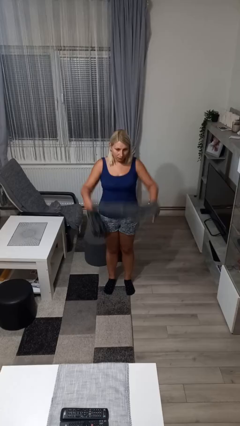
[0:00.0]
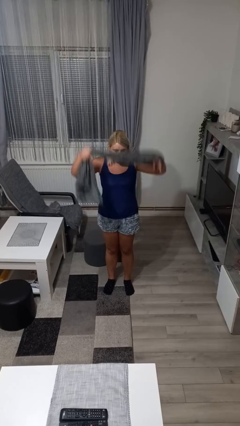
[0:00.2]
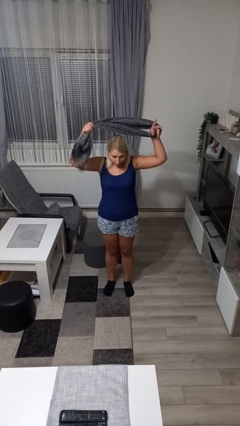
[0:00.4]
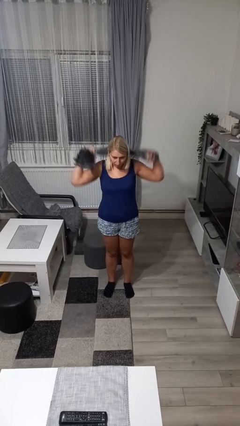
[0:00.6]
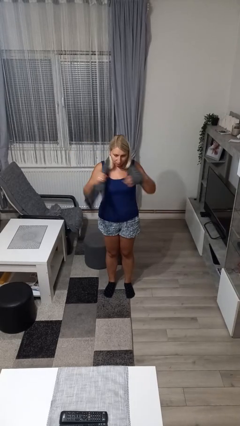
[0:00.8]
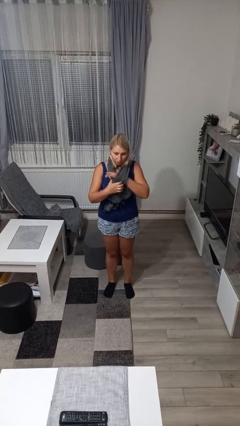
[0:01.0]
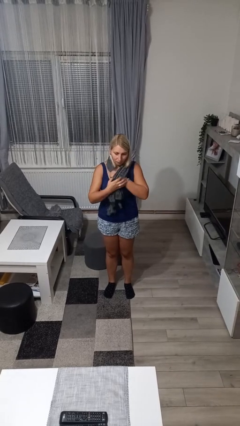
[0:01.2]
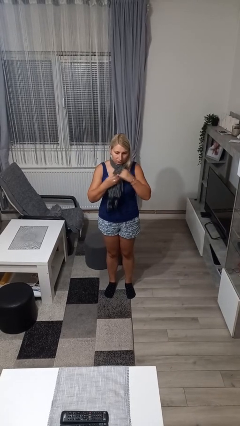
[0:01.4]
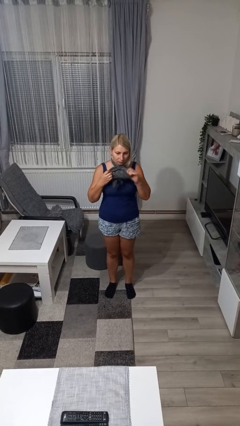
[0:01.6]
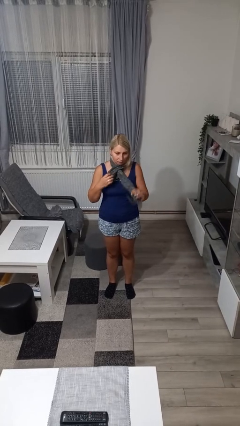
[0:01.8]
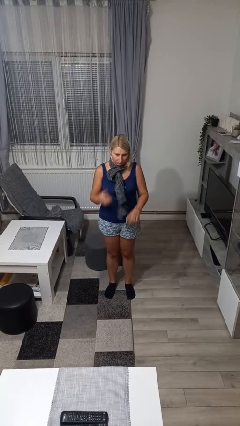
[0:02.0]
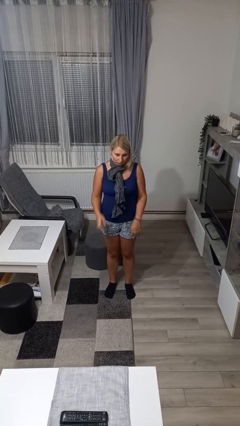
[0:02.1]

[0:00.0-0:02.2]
person puts on scarf

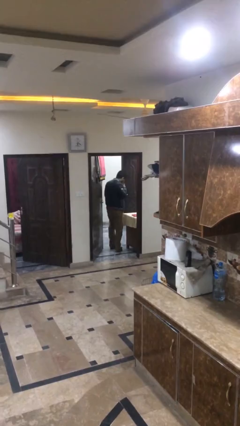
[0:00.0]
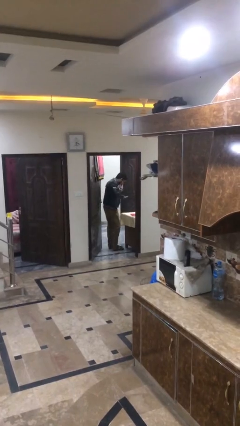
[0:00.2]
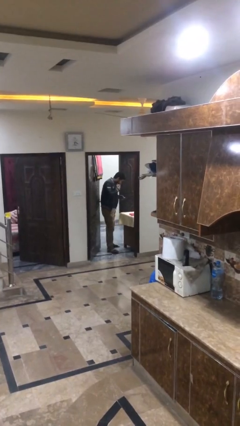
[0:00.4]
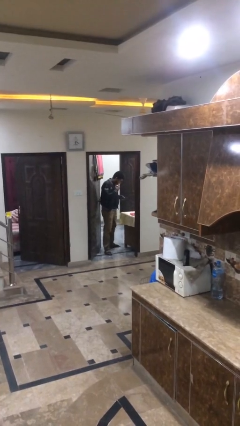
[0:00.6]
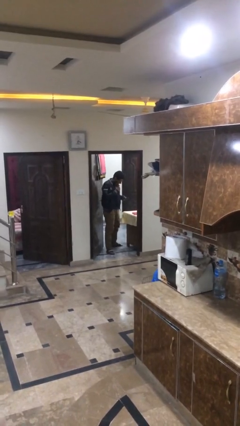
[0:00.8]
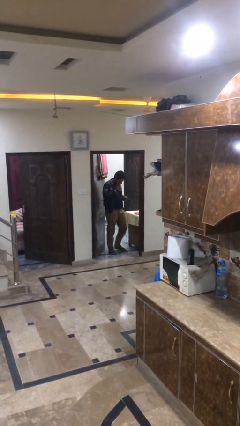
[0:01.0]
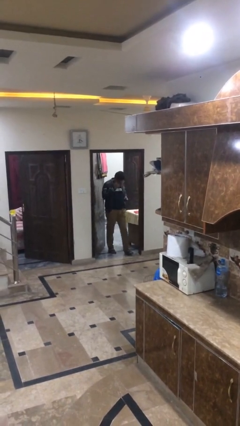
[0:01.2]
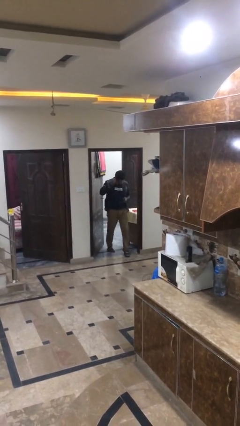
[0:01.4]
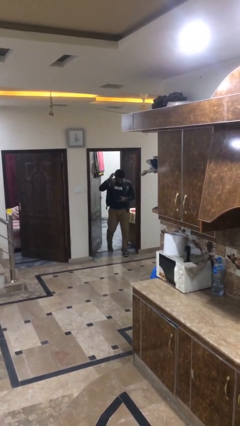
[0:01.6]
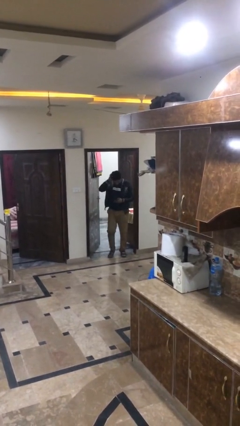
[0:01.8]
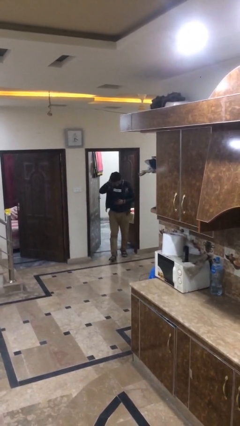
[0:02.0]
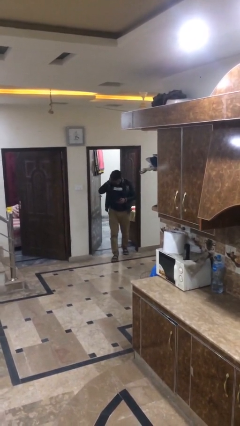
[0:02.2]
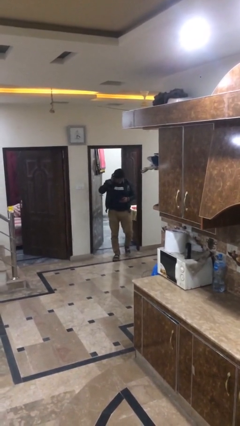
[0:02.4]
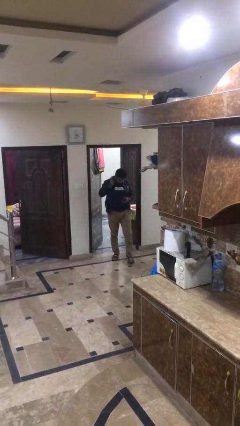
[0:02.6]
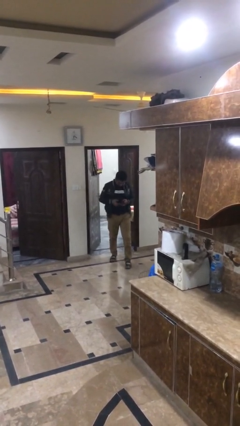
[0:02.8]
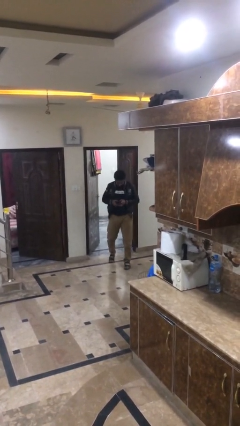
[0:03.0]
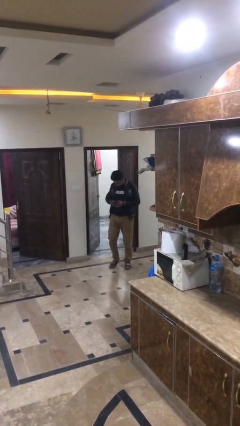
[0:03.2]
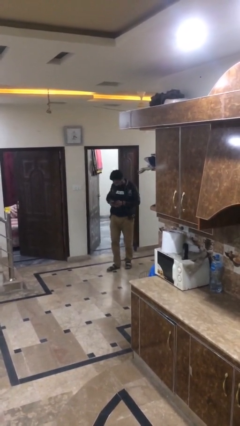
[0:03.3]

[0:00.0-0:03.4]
person exits scene through structure

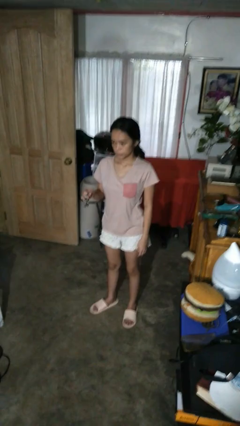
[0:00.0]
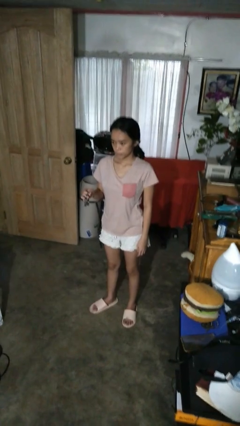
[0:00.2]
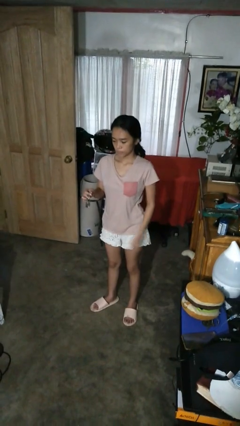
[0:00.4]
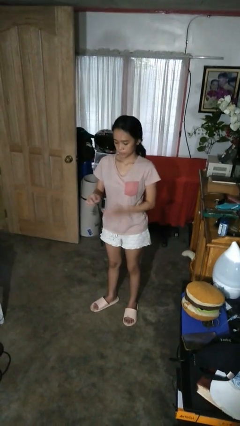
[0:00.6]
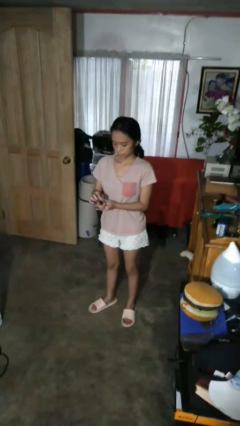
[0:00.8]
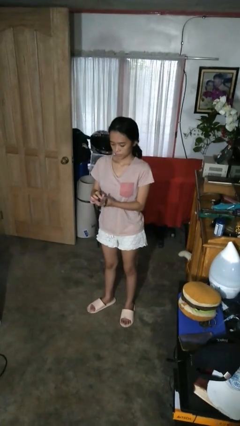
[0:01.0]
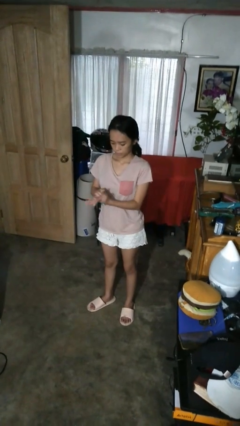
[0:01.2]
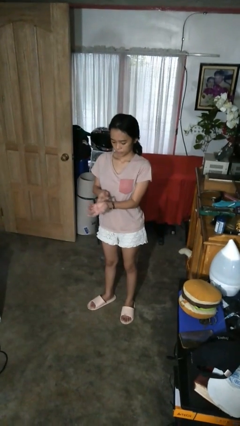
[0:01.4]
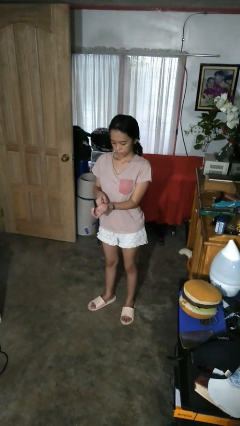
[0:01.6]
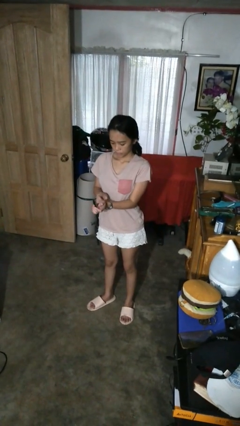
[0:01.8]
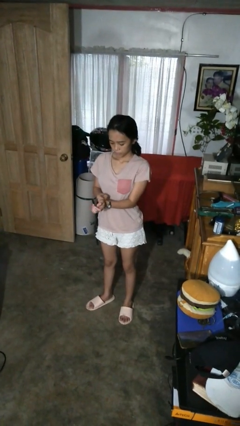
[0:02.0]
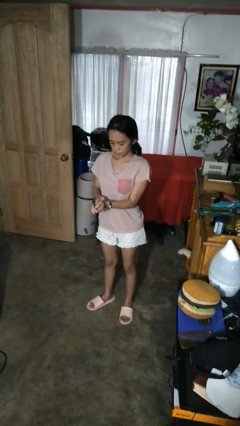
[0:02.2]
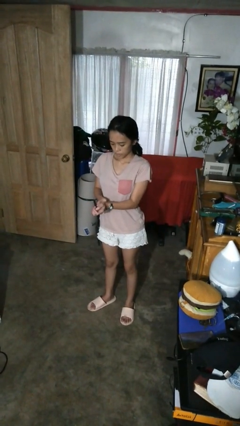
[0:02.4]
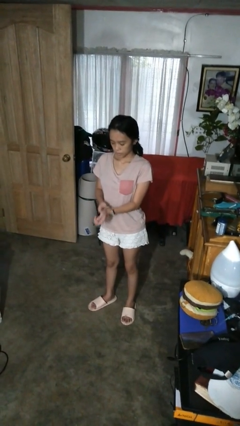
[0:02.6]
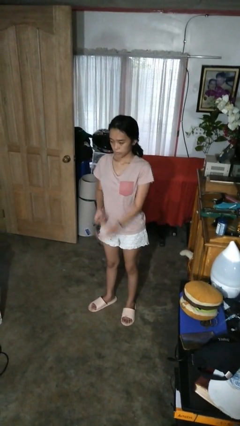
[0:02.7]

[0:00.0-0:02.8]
person puts on wristwatch

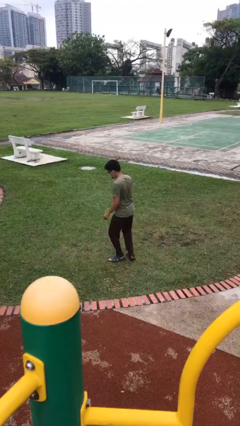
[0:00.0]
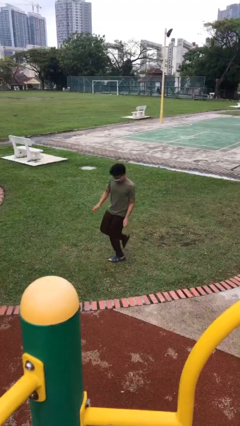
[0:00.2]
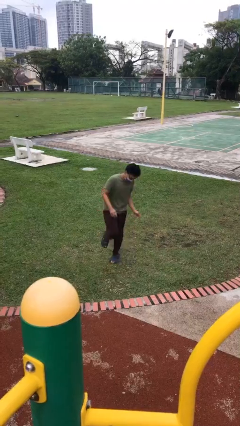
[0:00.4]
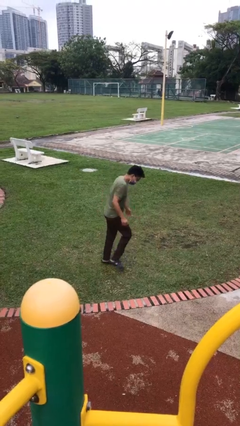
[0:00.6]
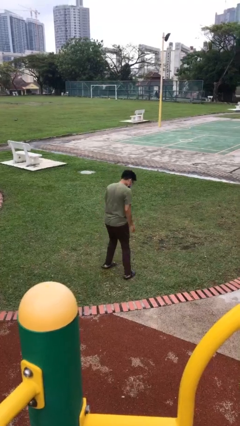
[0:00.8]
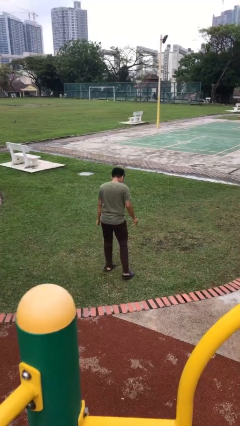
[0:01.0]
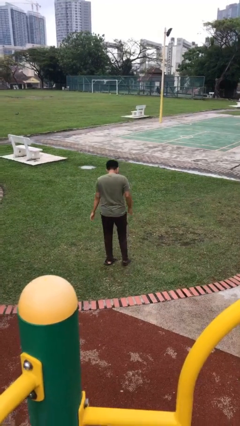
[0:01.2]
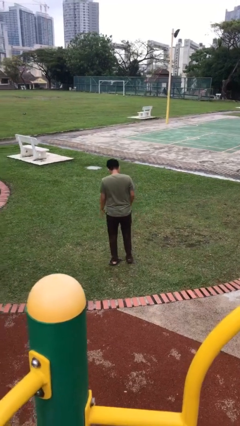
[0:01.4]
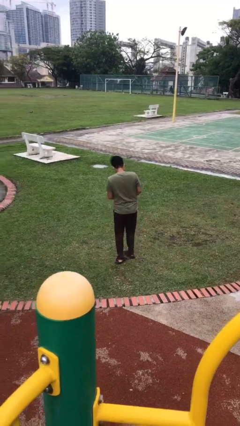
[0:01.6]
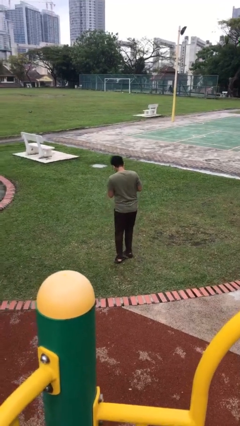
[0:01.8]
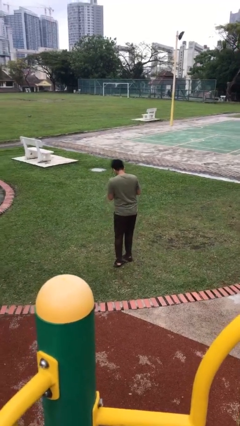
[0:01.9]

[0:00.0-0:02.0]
person twirls

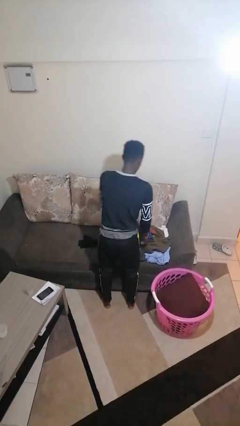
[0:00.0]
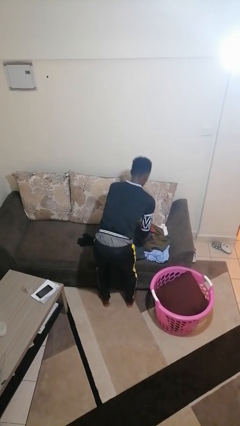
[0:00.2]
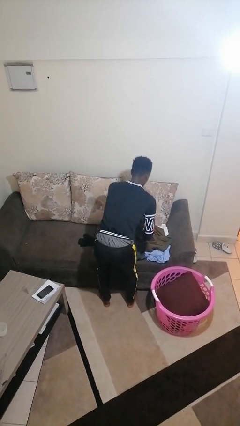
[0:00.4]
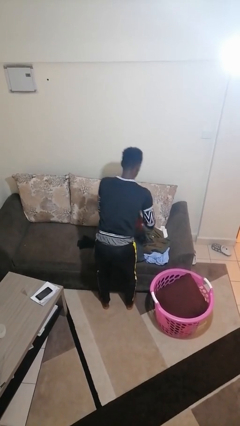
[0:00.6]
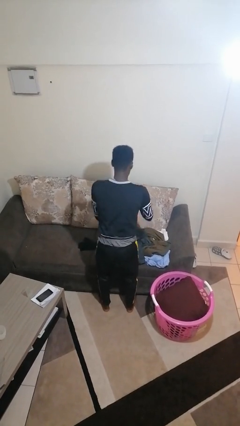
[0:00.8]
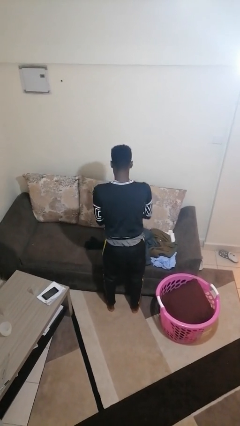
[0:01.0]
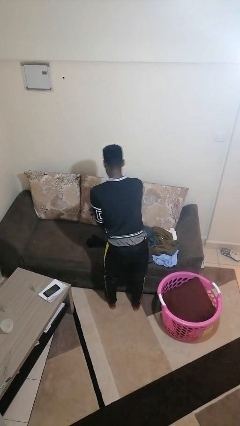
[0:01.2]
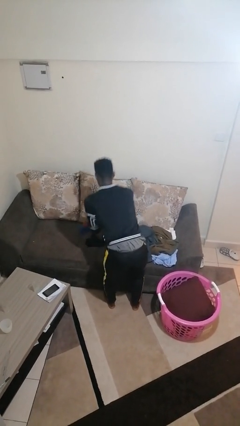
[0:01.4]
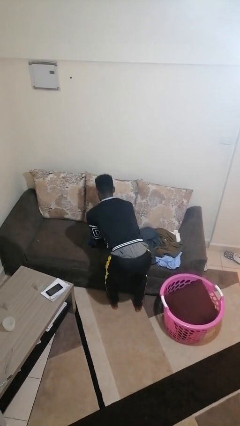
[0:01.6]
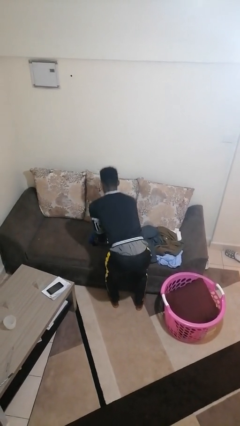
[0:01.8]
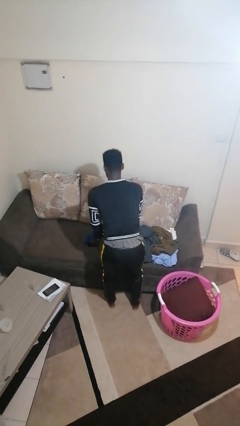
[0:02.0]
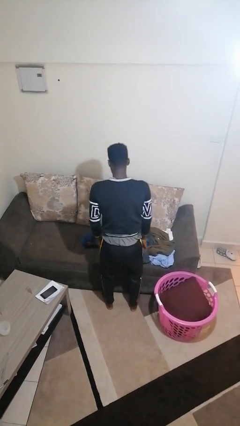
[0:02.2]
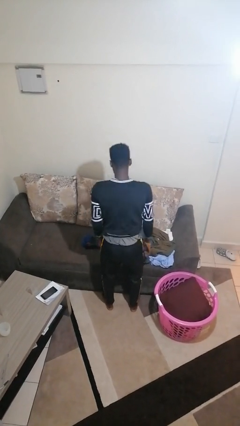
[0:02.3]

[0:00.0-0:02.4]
person folds socks

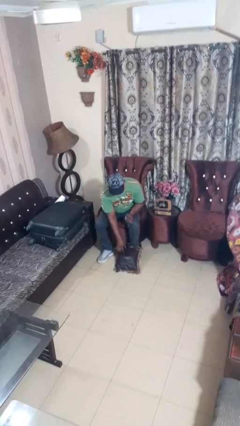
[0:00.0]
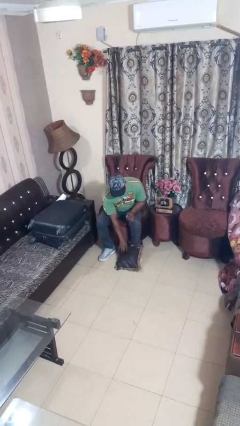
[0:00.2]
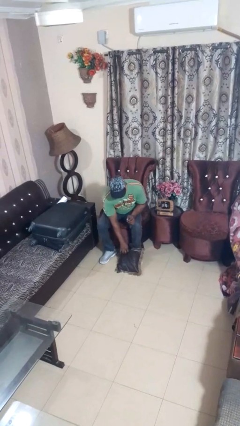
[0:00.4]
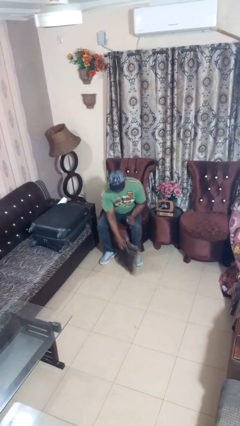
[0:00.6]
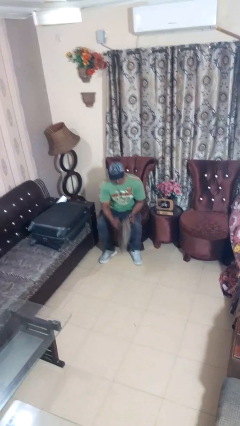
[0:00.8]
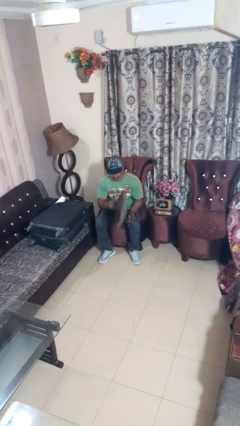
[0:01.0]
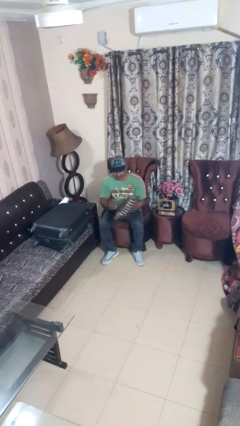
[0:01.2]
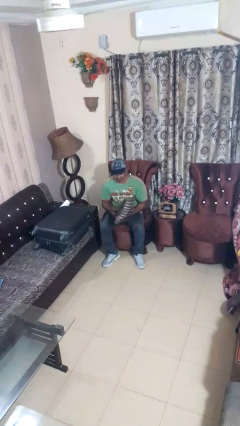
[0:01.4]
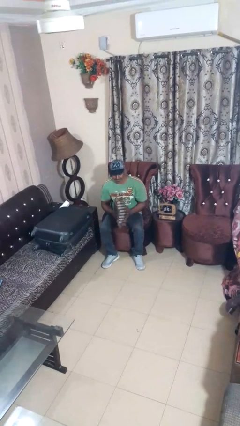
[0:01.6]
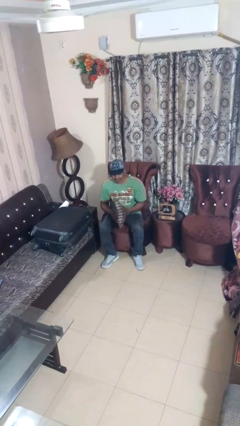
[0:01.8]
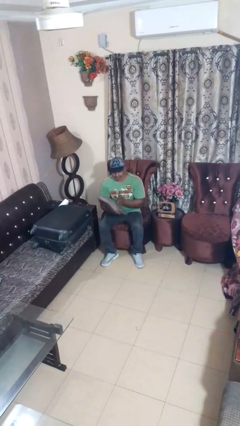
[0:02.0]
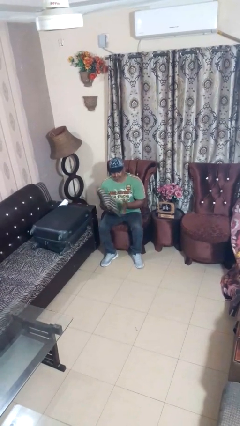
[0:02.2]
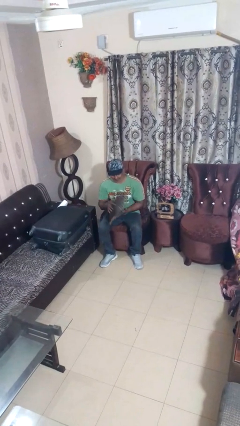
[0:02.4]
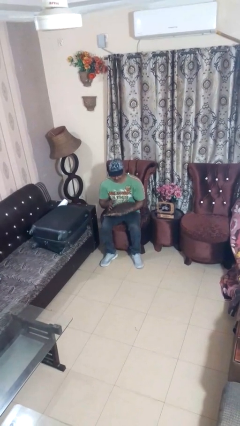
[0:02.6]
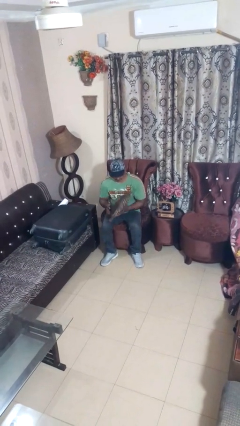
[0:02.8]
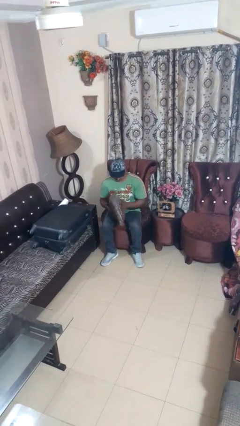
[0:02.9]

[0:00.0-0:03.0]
person picks up object from floor

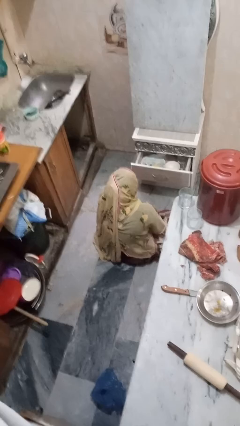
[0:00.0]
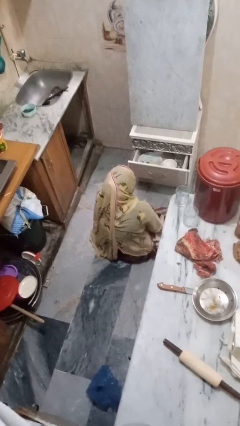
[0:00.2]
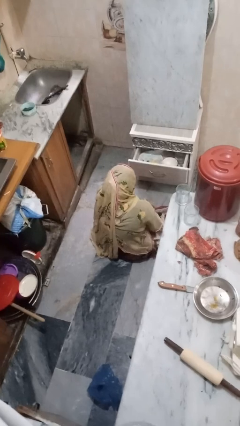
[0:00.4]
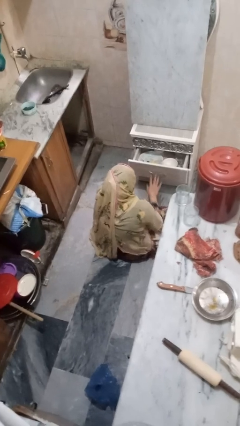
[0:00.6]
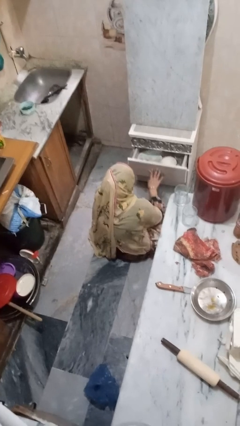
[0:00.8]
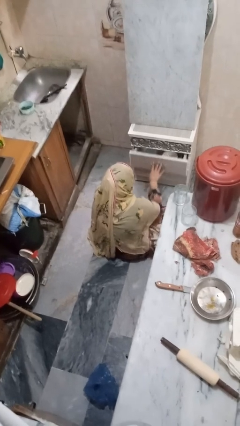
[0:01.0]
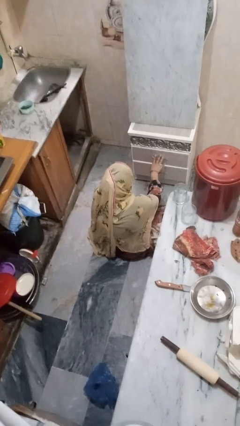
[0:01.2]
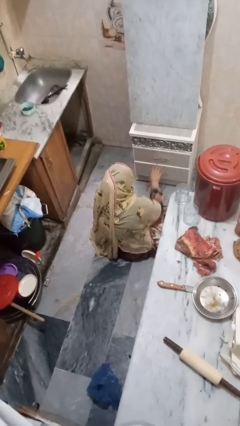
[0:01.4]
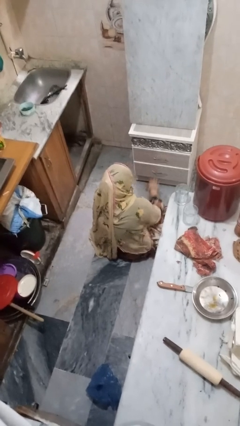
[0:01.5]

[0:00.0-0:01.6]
person closes kitchen drawer
